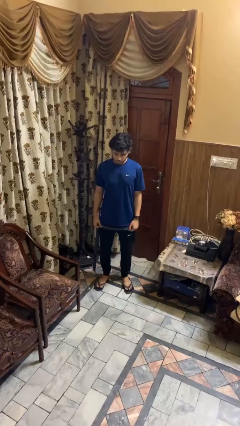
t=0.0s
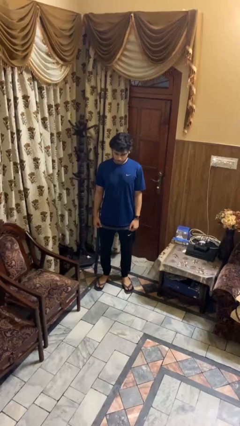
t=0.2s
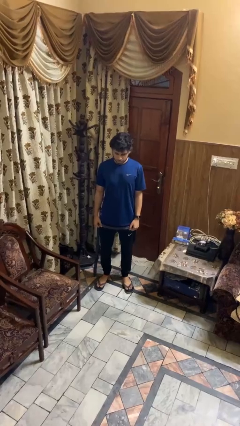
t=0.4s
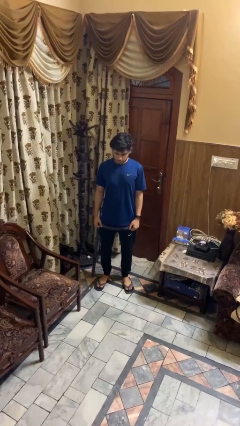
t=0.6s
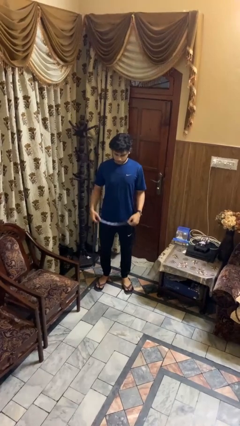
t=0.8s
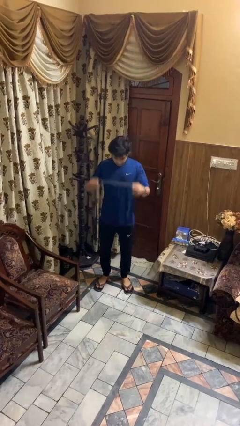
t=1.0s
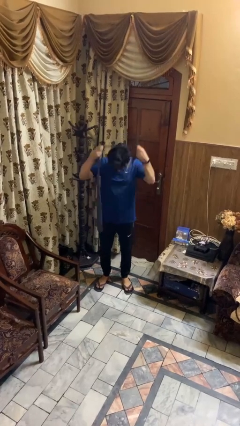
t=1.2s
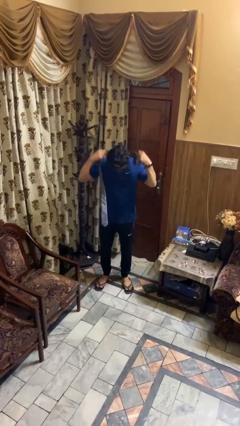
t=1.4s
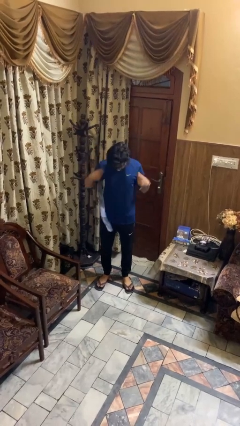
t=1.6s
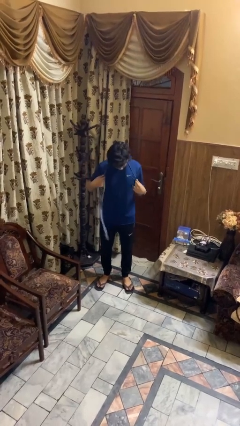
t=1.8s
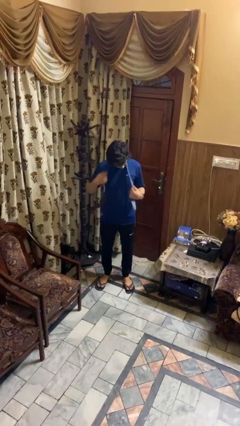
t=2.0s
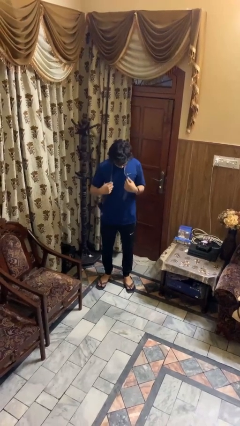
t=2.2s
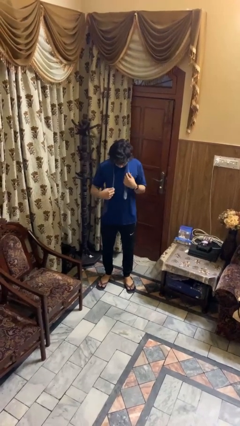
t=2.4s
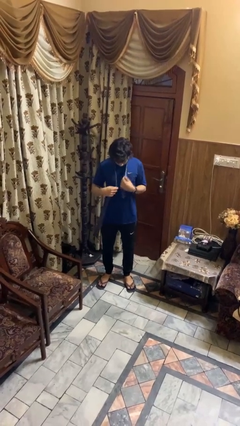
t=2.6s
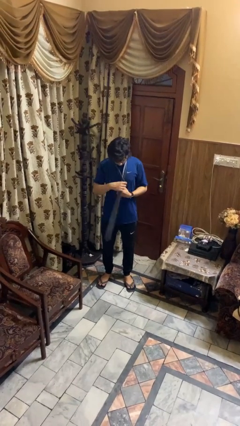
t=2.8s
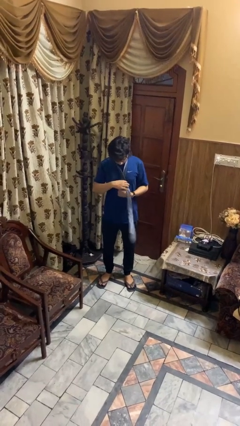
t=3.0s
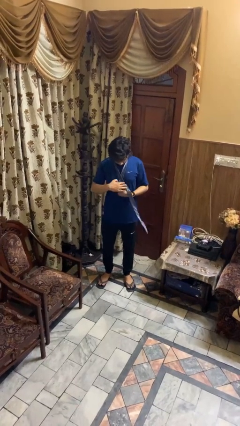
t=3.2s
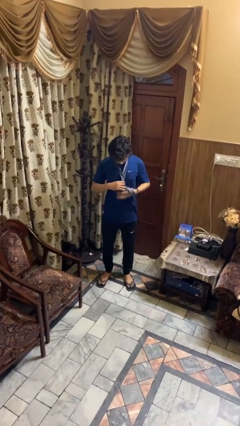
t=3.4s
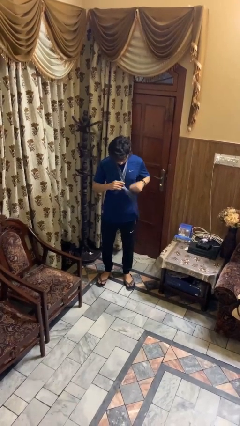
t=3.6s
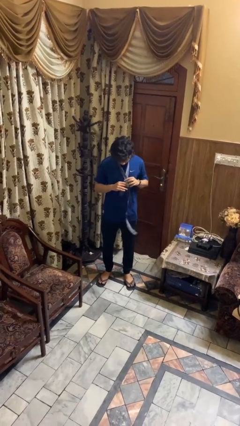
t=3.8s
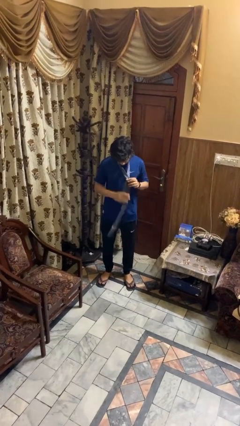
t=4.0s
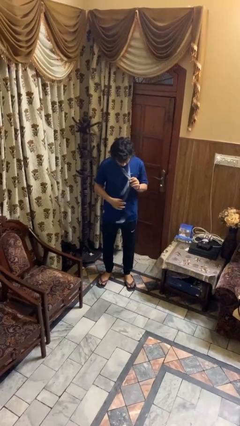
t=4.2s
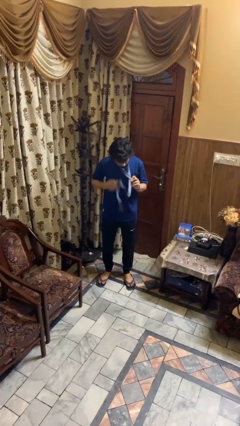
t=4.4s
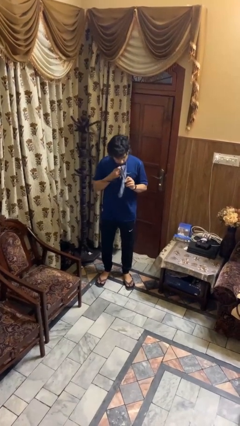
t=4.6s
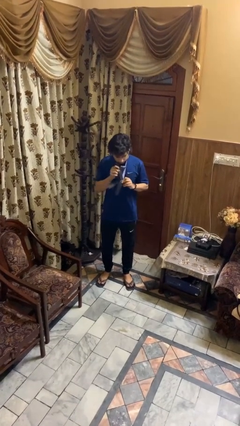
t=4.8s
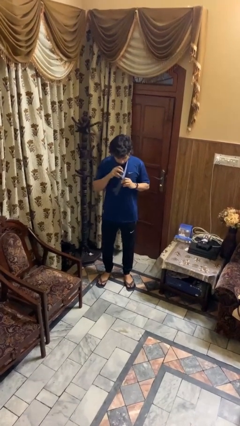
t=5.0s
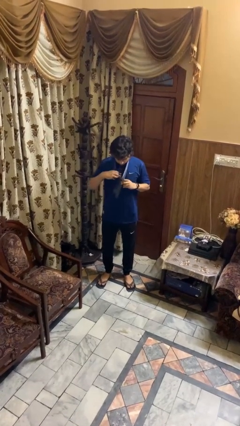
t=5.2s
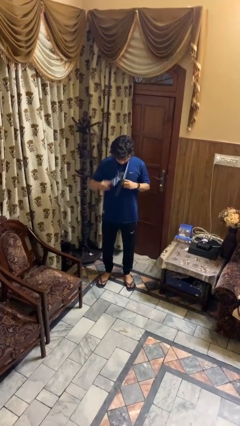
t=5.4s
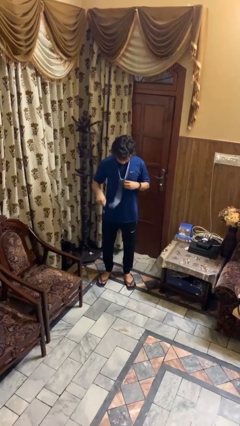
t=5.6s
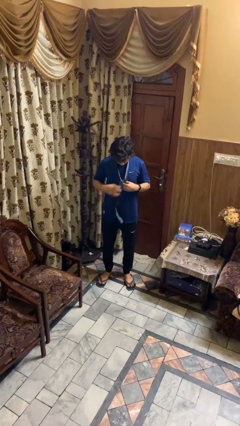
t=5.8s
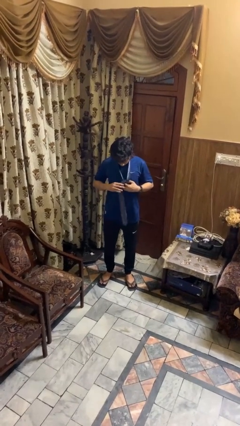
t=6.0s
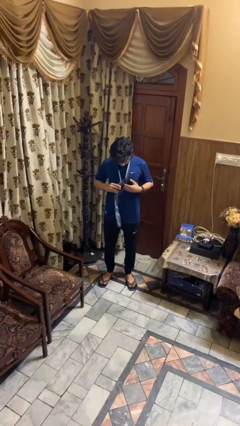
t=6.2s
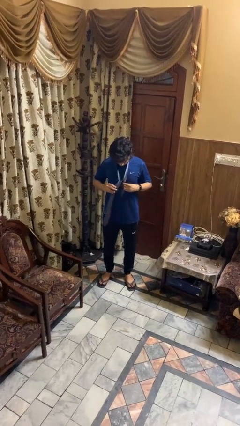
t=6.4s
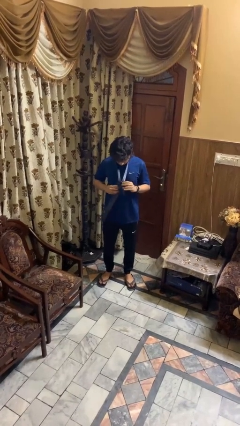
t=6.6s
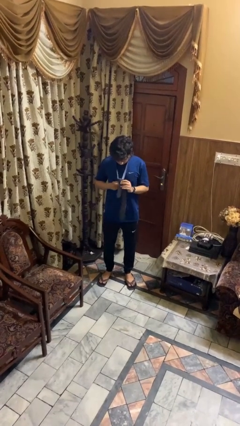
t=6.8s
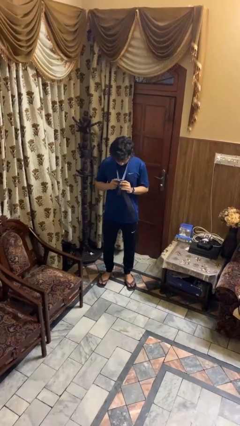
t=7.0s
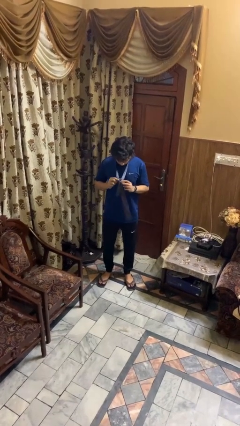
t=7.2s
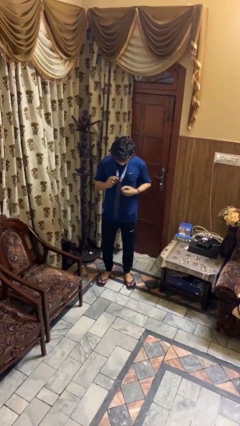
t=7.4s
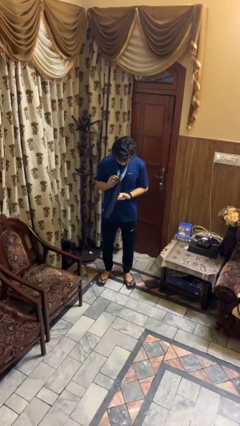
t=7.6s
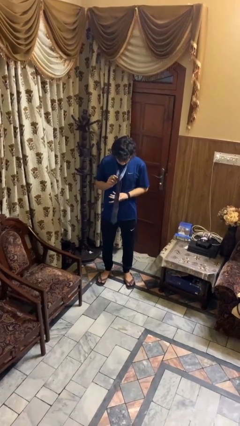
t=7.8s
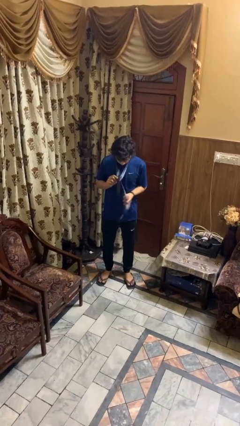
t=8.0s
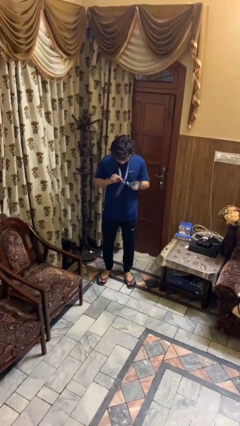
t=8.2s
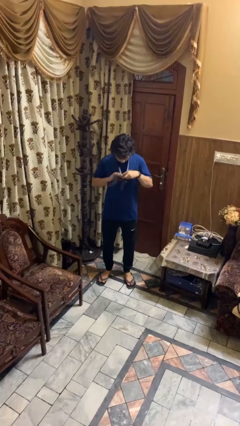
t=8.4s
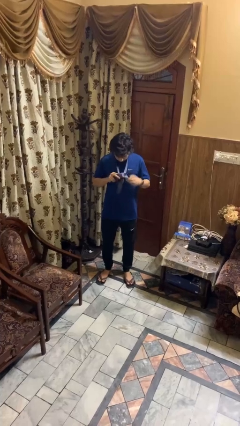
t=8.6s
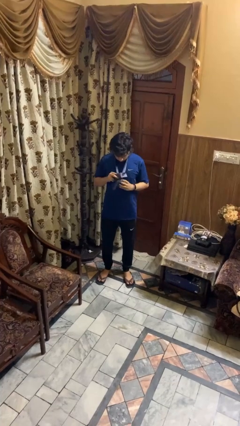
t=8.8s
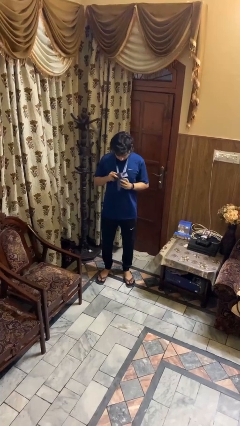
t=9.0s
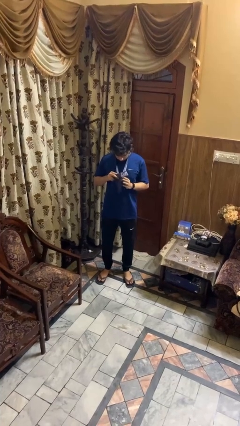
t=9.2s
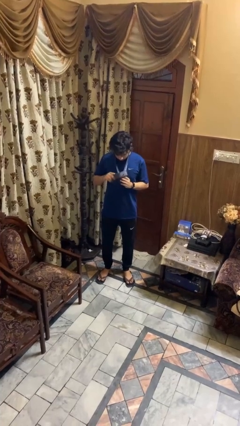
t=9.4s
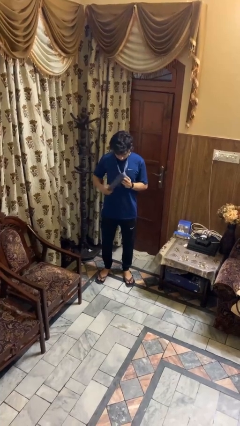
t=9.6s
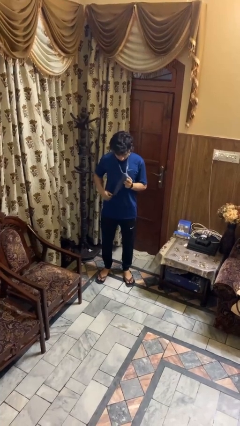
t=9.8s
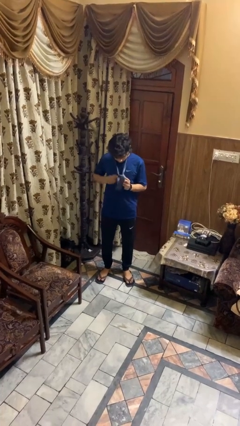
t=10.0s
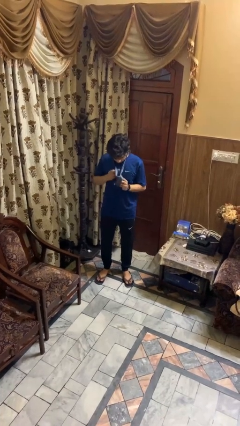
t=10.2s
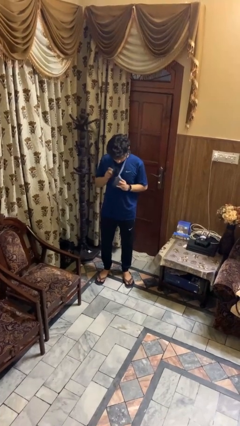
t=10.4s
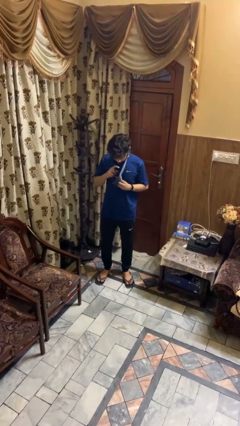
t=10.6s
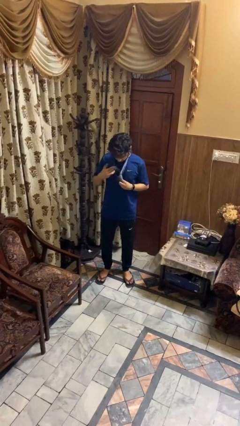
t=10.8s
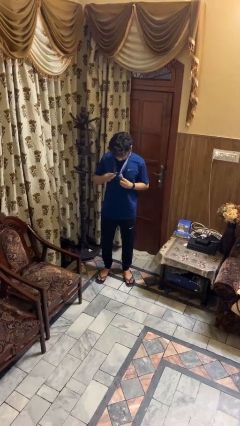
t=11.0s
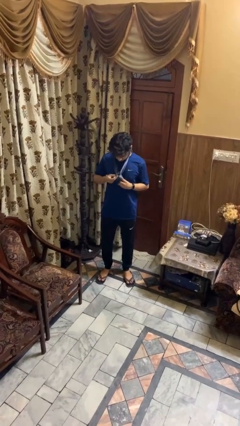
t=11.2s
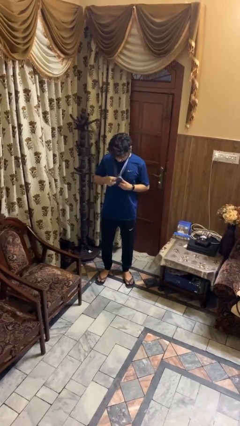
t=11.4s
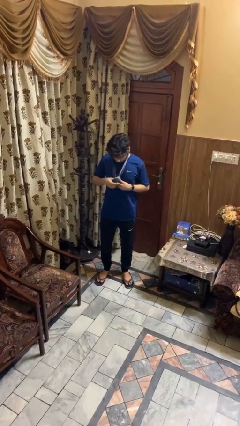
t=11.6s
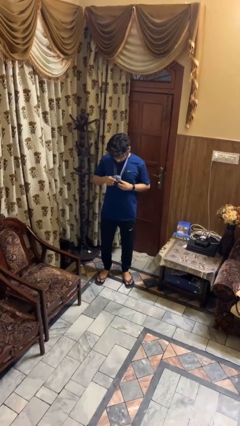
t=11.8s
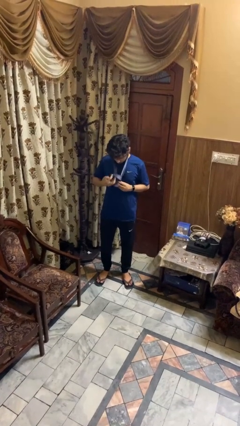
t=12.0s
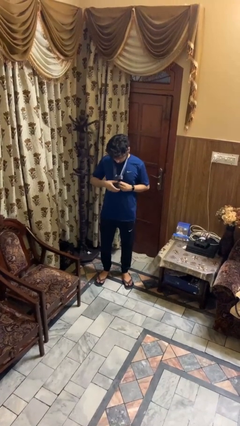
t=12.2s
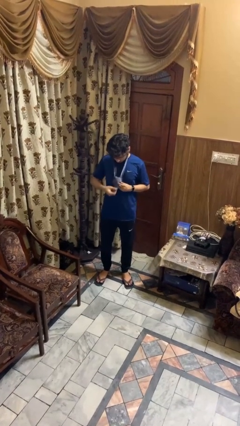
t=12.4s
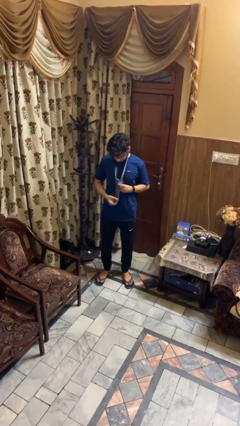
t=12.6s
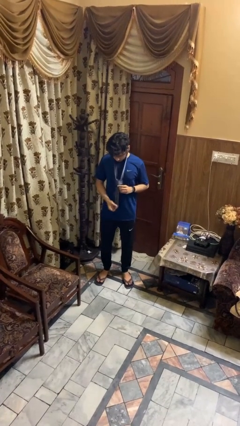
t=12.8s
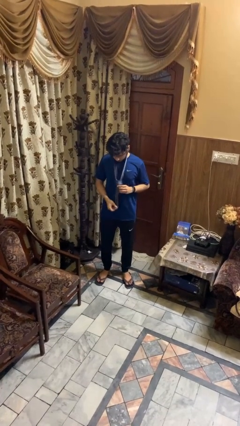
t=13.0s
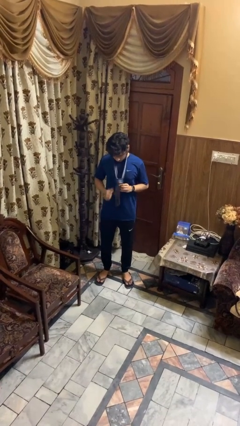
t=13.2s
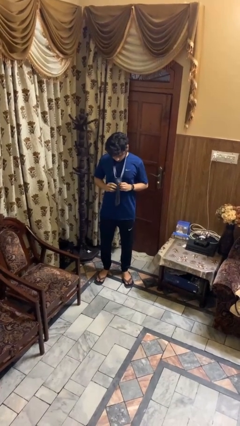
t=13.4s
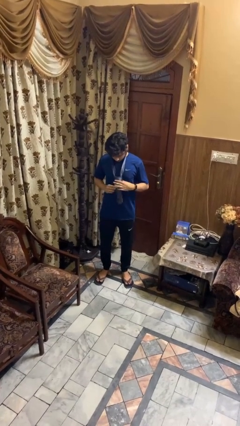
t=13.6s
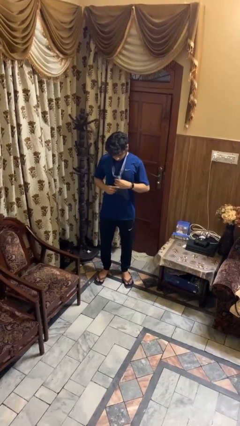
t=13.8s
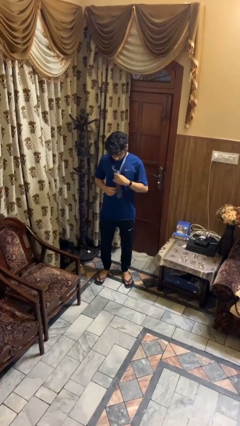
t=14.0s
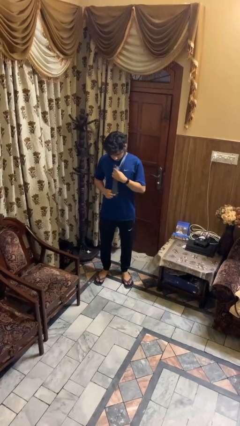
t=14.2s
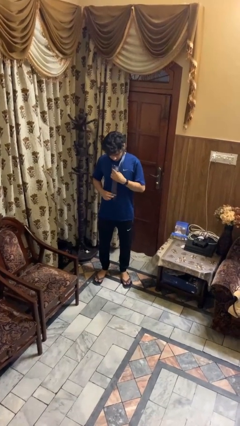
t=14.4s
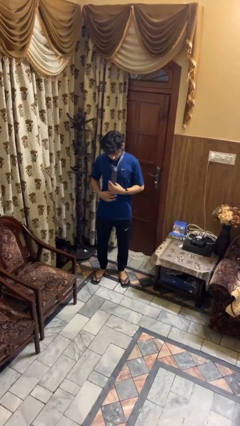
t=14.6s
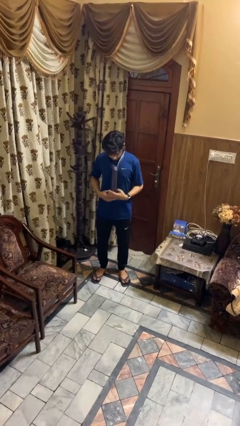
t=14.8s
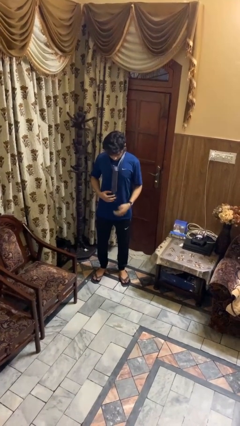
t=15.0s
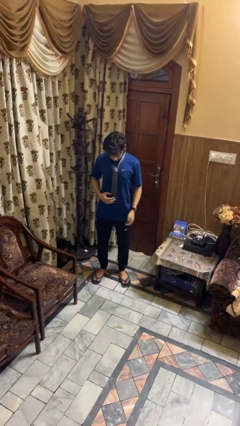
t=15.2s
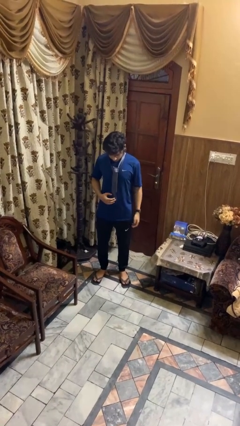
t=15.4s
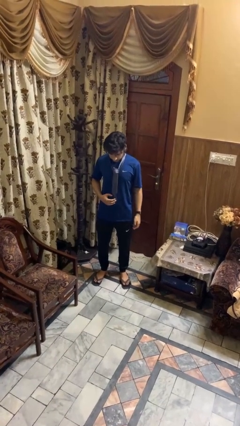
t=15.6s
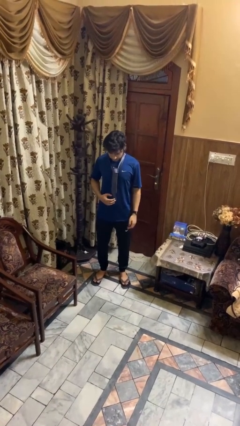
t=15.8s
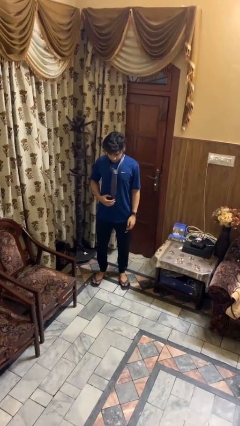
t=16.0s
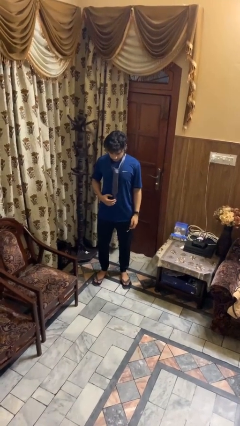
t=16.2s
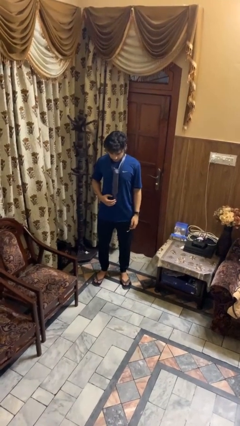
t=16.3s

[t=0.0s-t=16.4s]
person puts on necktie

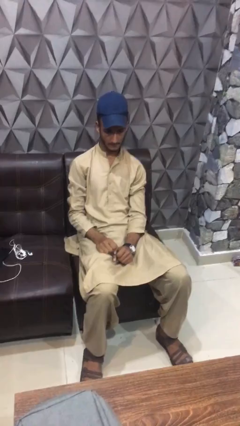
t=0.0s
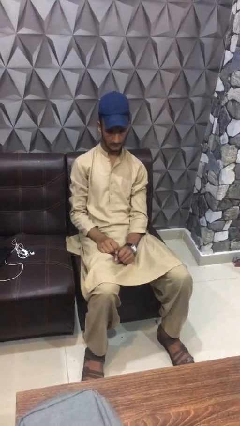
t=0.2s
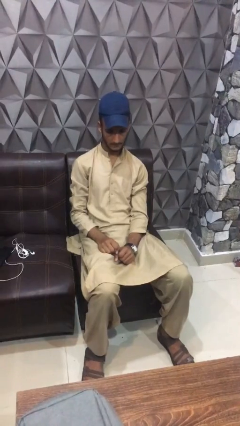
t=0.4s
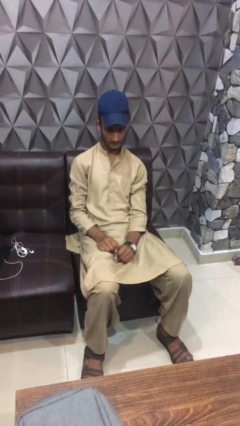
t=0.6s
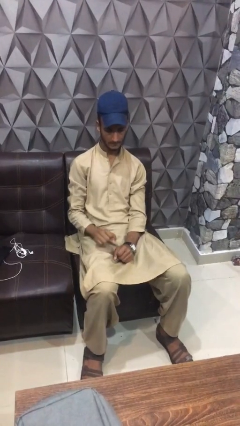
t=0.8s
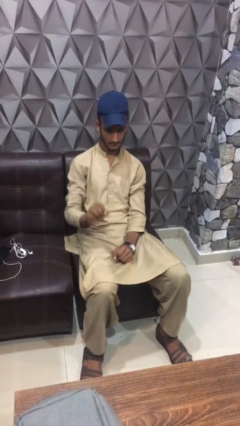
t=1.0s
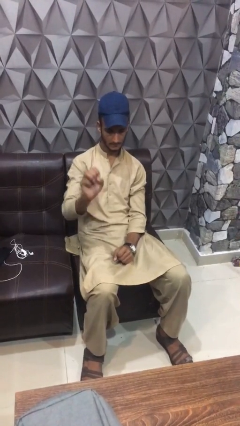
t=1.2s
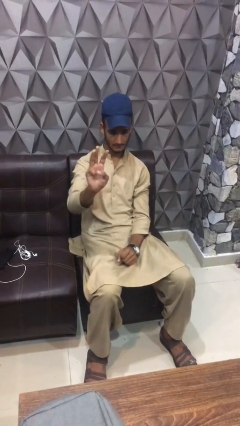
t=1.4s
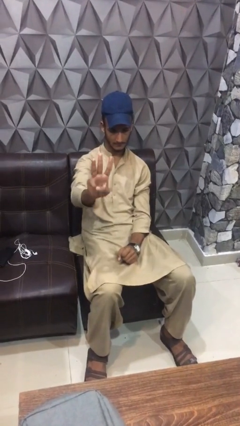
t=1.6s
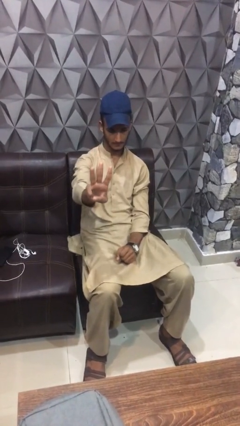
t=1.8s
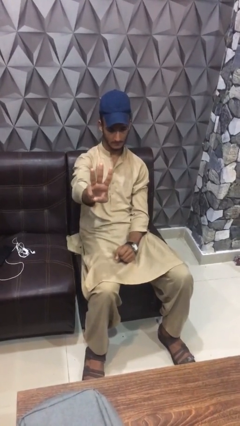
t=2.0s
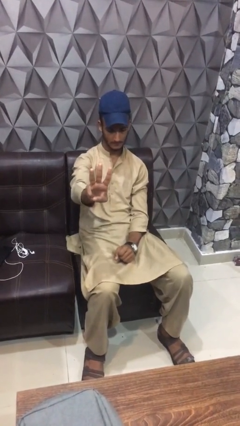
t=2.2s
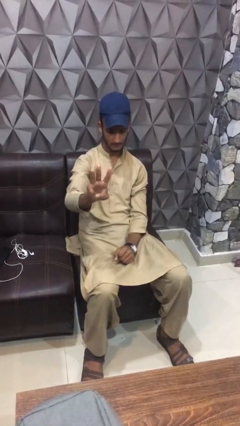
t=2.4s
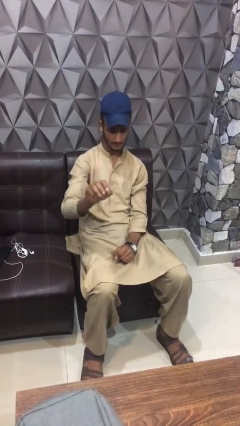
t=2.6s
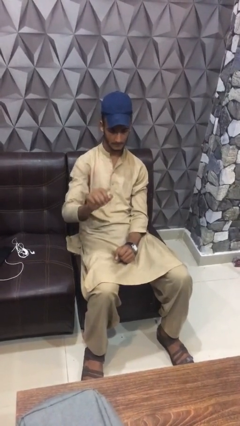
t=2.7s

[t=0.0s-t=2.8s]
person gestures number three
